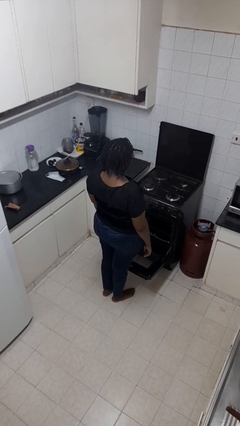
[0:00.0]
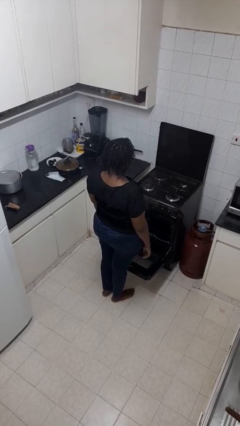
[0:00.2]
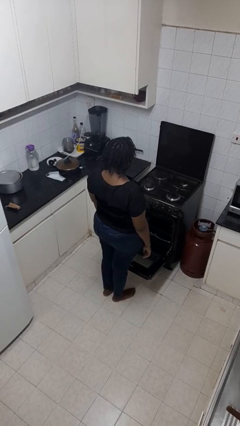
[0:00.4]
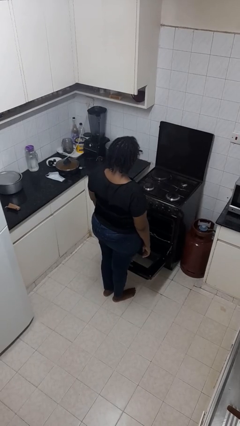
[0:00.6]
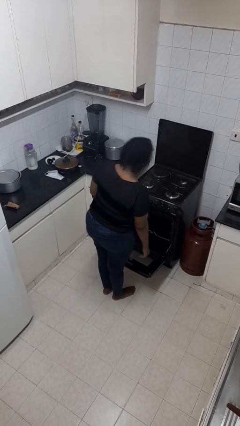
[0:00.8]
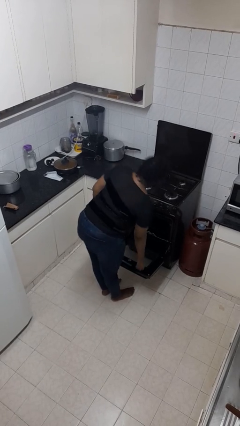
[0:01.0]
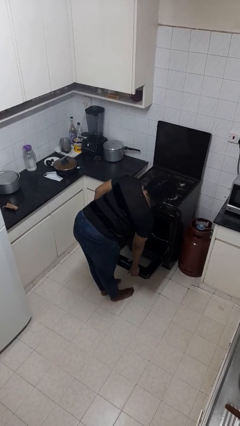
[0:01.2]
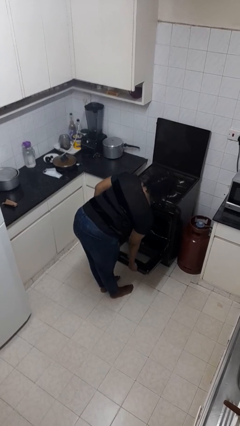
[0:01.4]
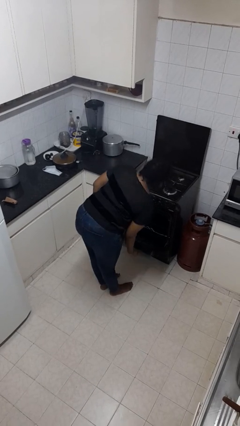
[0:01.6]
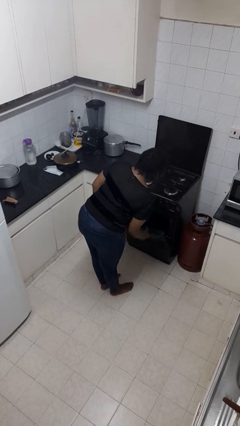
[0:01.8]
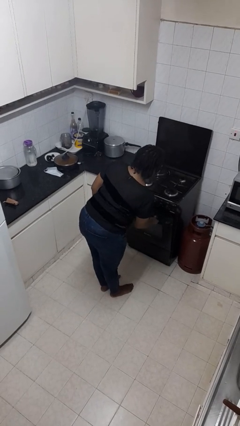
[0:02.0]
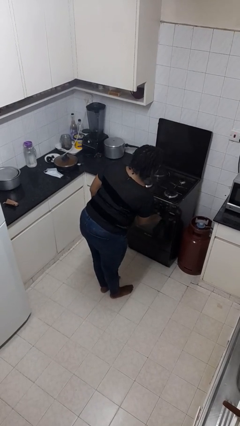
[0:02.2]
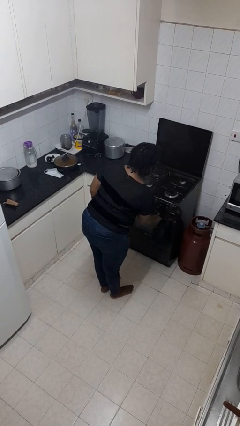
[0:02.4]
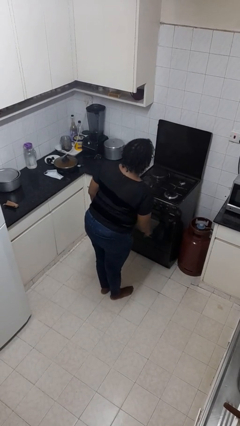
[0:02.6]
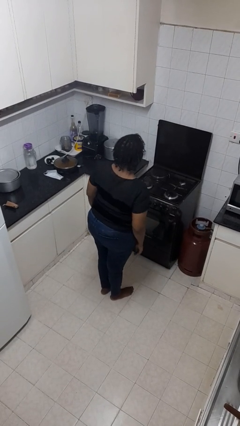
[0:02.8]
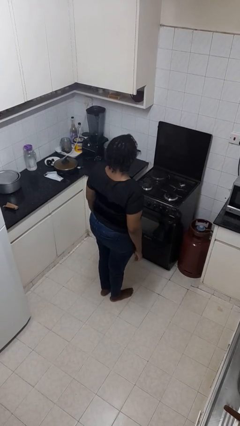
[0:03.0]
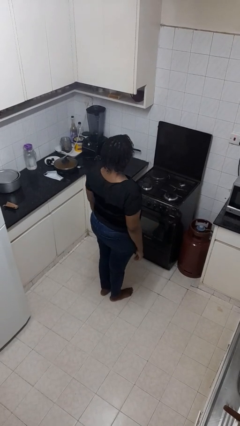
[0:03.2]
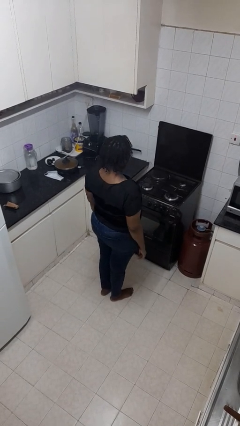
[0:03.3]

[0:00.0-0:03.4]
person closes oven door

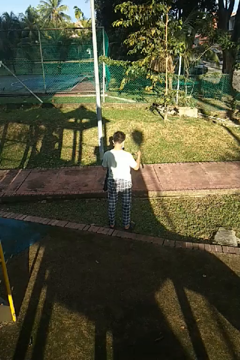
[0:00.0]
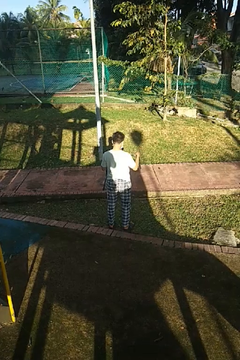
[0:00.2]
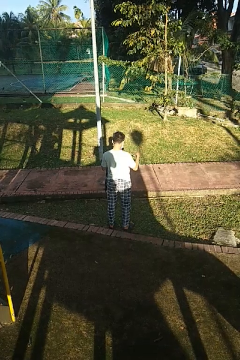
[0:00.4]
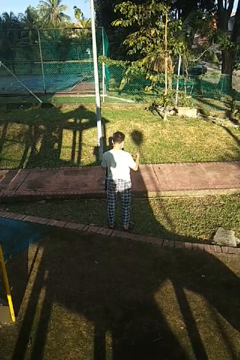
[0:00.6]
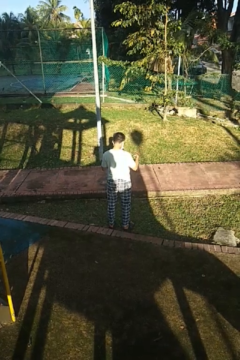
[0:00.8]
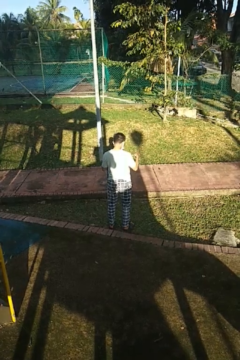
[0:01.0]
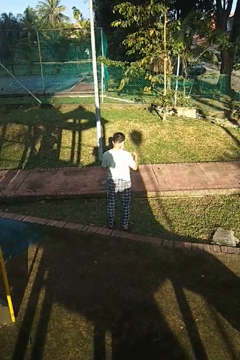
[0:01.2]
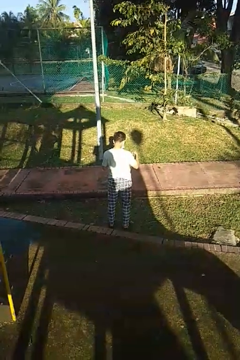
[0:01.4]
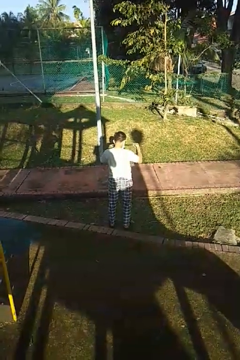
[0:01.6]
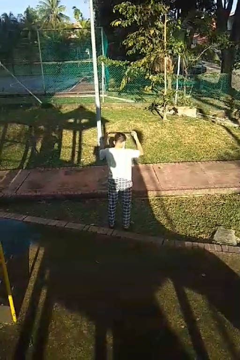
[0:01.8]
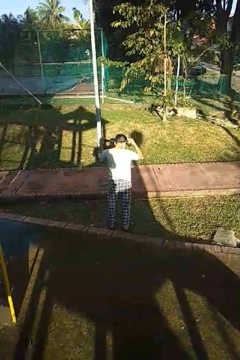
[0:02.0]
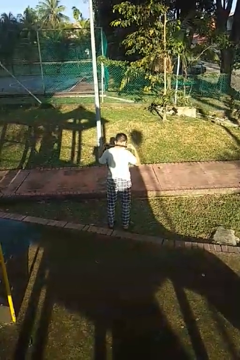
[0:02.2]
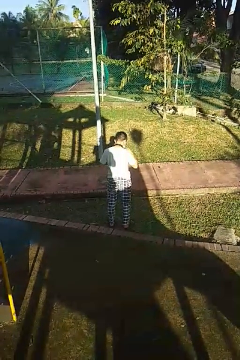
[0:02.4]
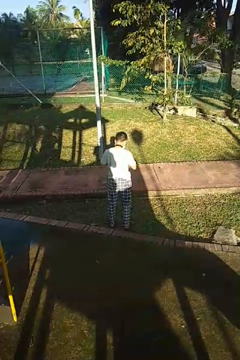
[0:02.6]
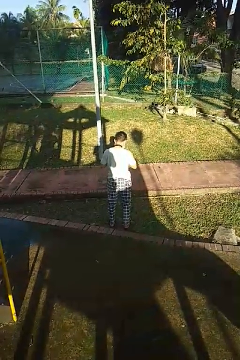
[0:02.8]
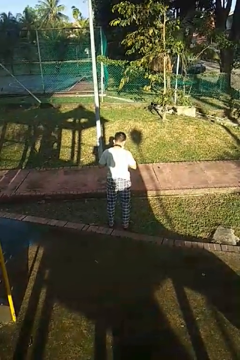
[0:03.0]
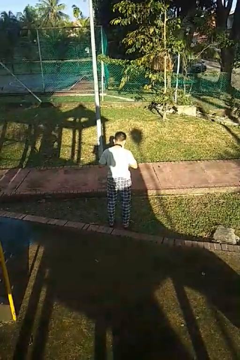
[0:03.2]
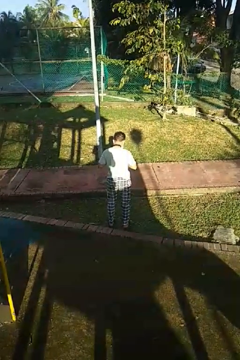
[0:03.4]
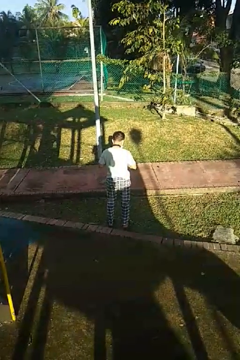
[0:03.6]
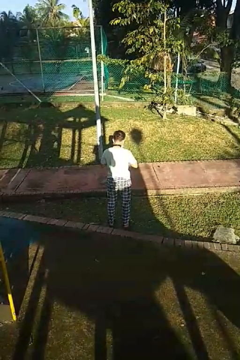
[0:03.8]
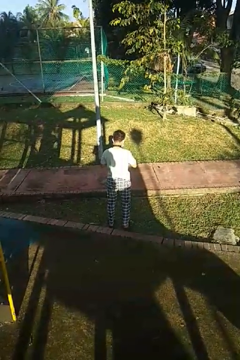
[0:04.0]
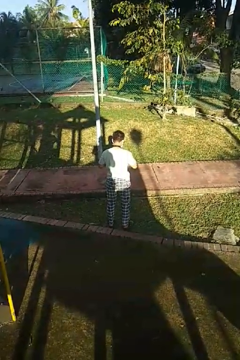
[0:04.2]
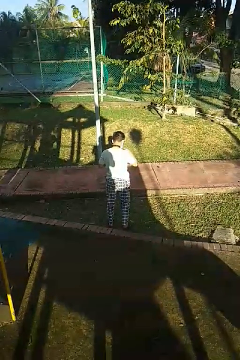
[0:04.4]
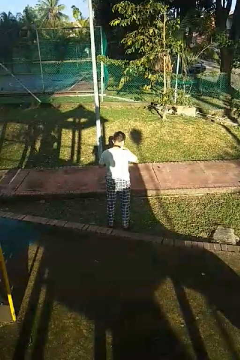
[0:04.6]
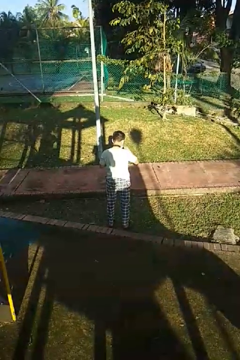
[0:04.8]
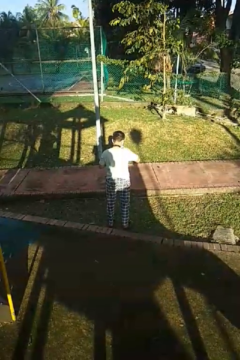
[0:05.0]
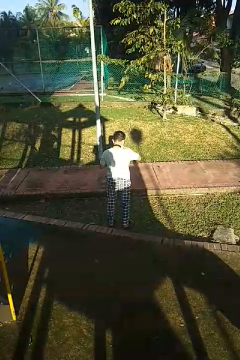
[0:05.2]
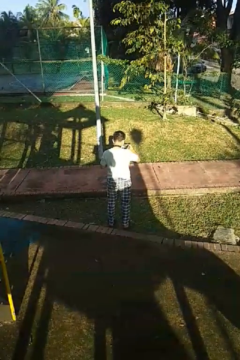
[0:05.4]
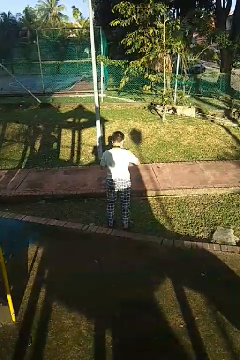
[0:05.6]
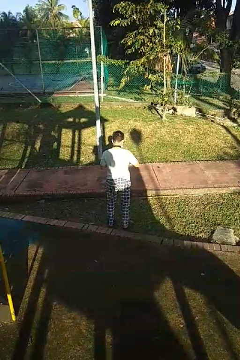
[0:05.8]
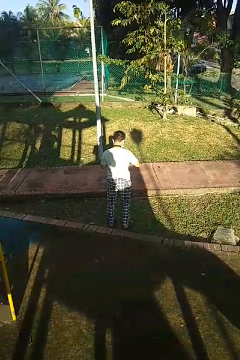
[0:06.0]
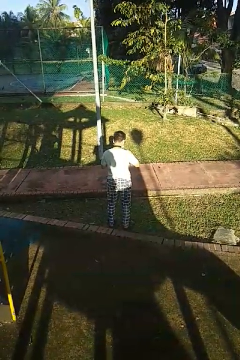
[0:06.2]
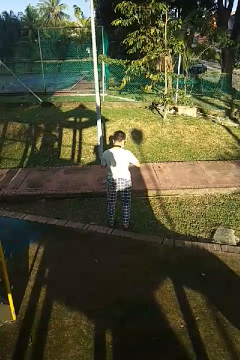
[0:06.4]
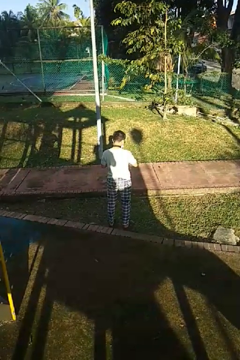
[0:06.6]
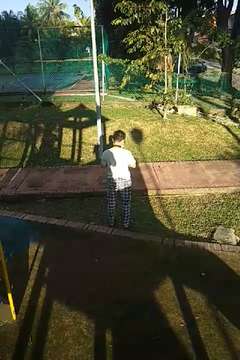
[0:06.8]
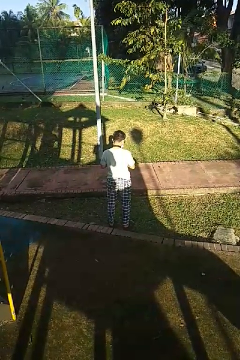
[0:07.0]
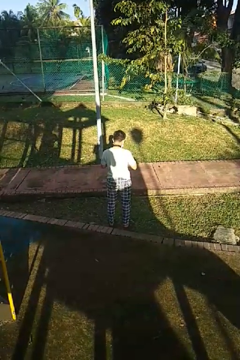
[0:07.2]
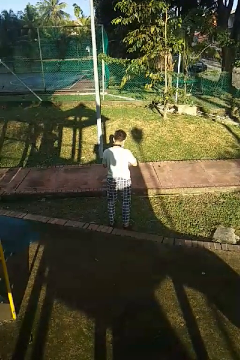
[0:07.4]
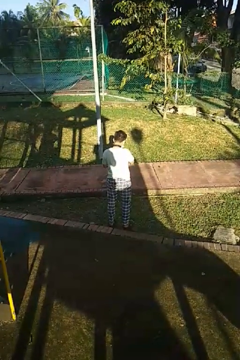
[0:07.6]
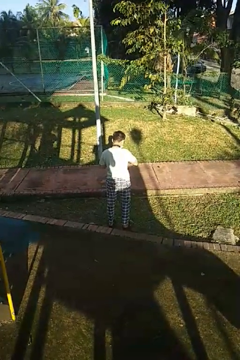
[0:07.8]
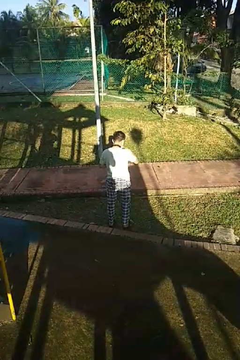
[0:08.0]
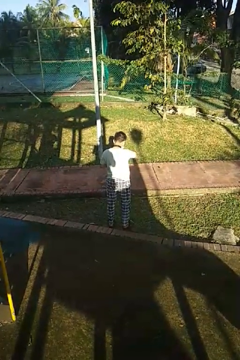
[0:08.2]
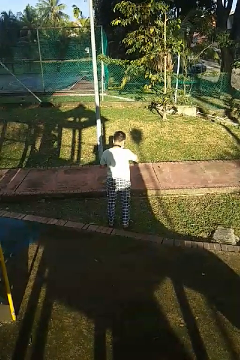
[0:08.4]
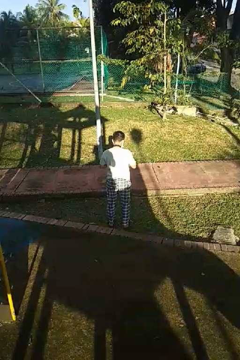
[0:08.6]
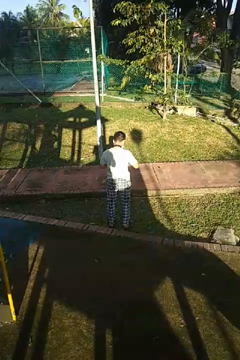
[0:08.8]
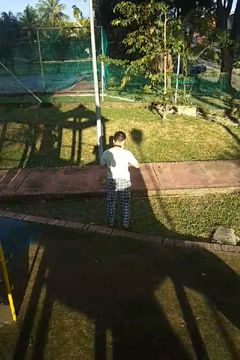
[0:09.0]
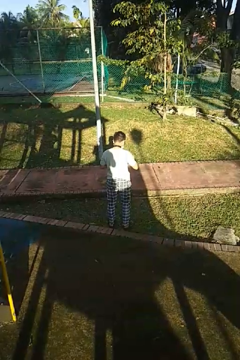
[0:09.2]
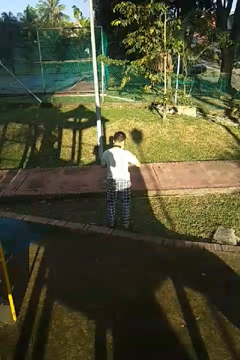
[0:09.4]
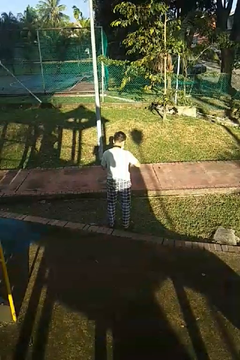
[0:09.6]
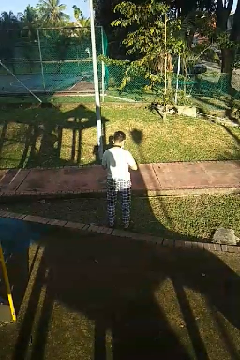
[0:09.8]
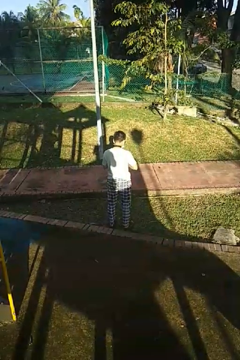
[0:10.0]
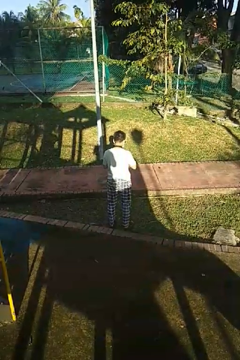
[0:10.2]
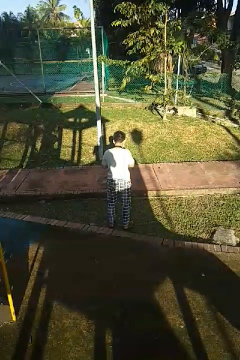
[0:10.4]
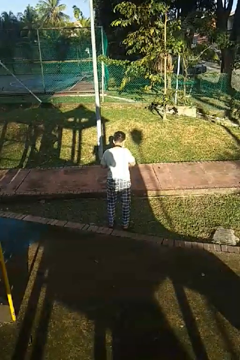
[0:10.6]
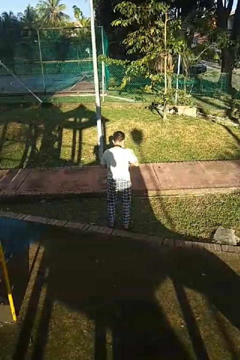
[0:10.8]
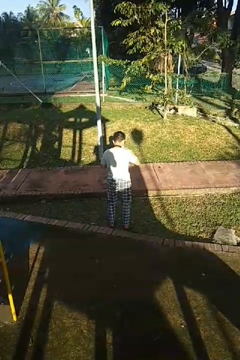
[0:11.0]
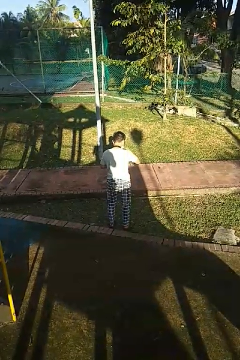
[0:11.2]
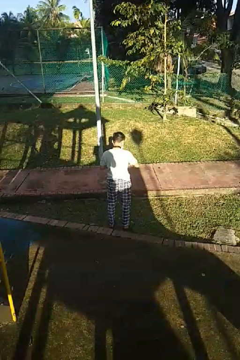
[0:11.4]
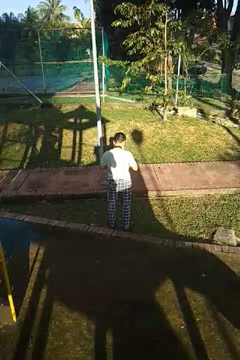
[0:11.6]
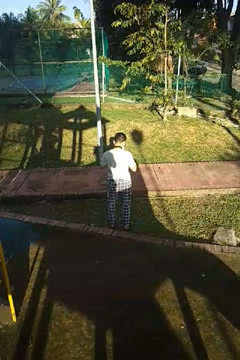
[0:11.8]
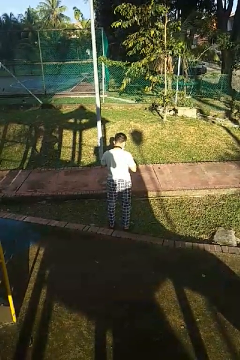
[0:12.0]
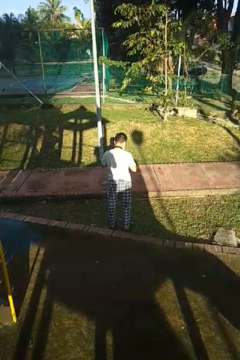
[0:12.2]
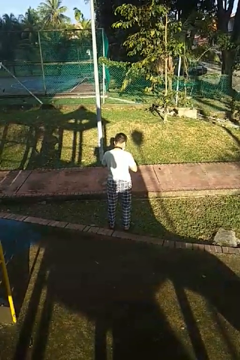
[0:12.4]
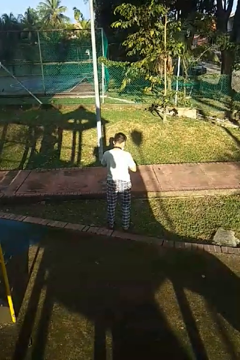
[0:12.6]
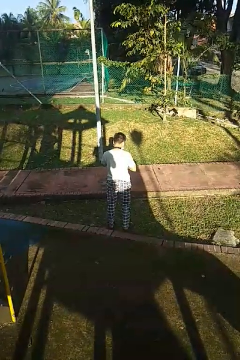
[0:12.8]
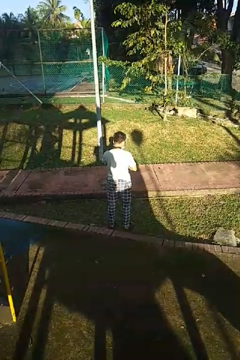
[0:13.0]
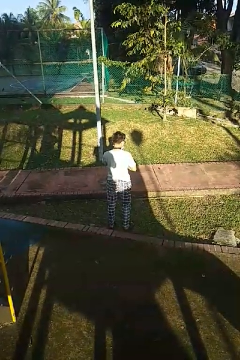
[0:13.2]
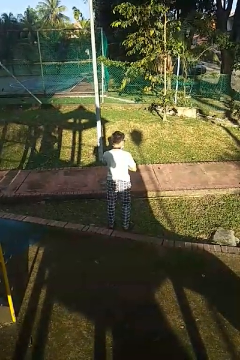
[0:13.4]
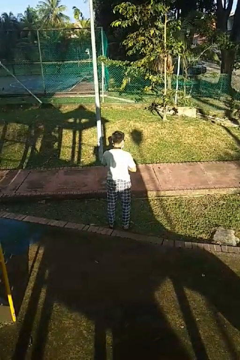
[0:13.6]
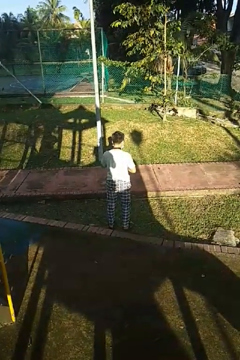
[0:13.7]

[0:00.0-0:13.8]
person puts on necktie

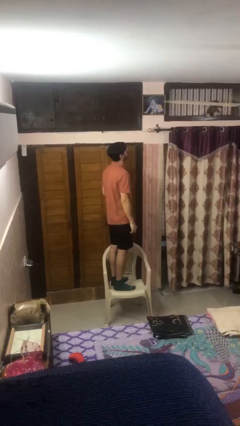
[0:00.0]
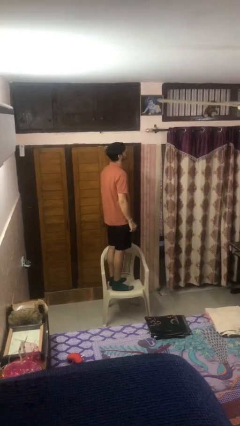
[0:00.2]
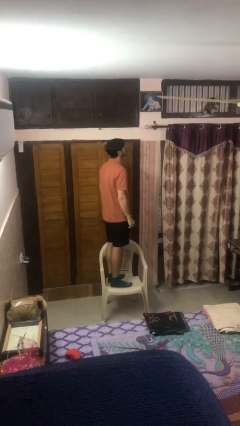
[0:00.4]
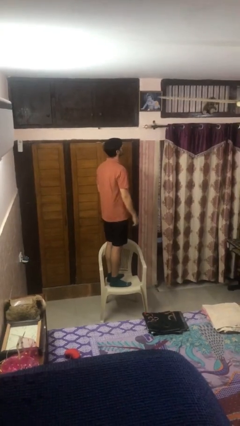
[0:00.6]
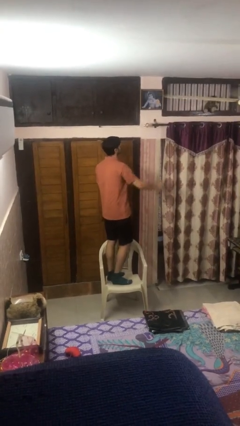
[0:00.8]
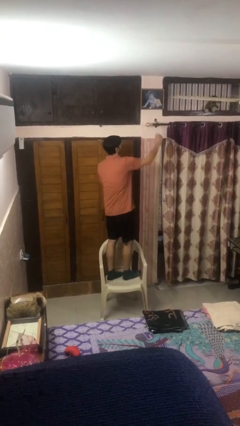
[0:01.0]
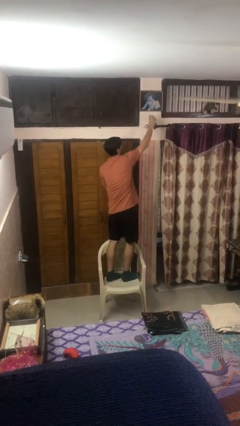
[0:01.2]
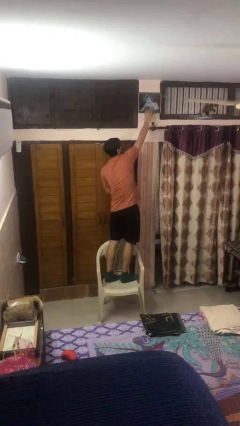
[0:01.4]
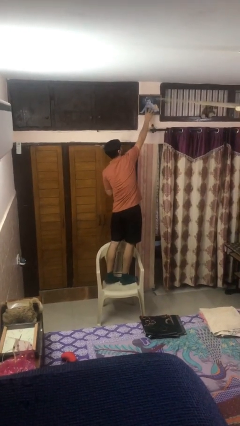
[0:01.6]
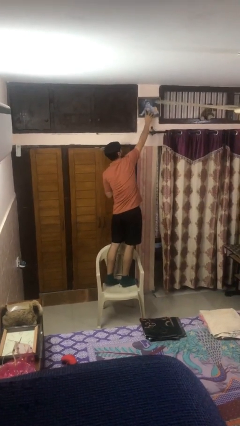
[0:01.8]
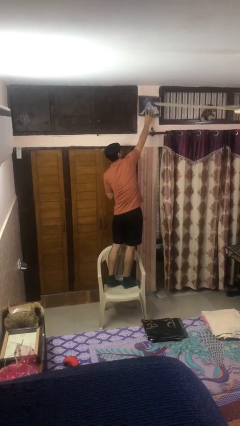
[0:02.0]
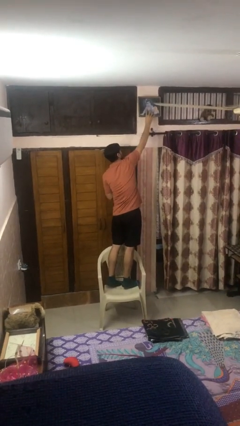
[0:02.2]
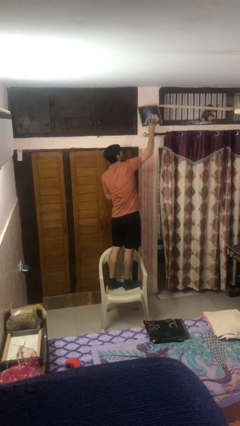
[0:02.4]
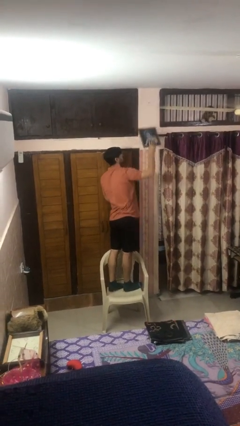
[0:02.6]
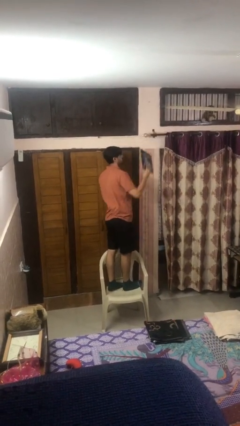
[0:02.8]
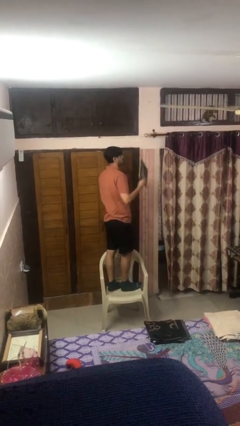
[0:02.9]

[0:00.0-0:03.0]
person takes down picture frame

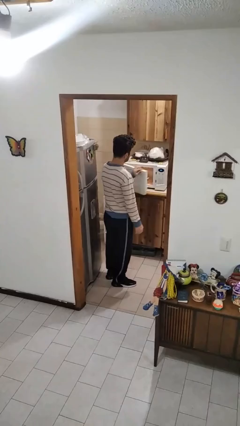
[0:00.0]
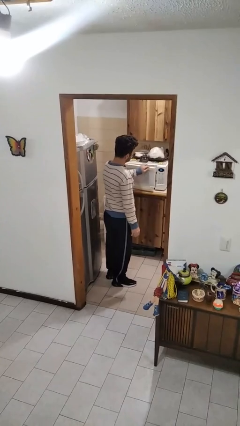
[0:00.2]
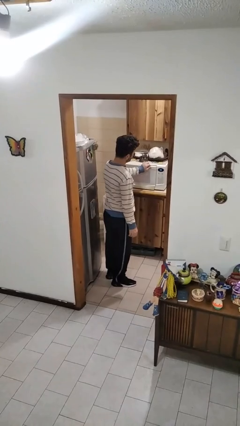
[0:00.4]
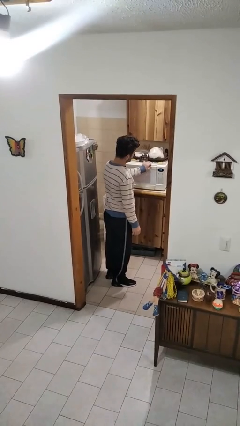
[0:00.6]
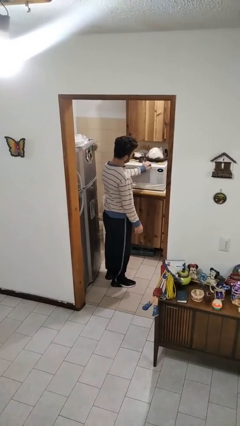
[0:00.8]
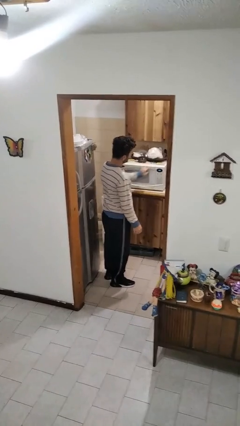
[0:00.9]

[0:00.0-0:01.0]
person closes microwave
